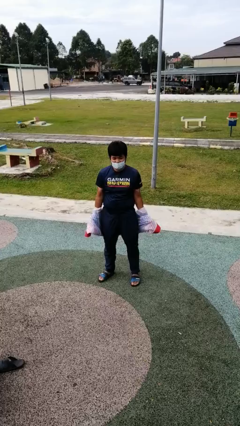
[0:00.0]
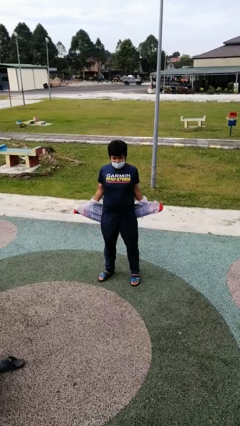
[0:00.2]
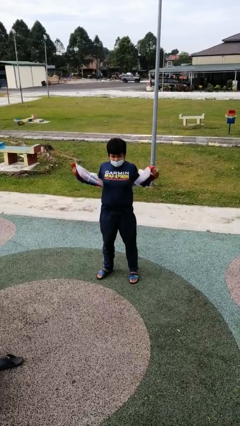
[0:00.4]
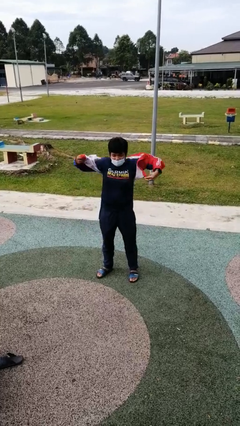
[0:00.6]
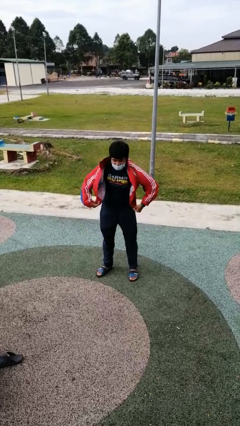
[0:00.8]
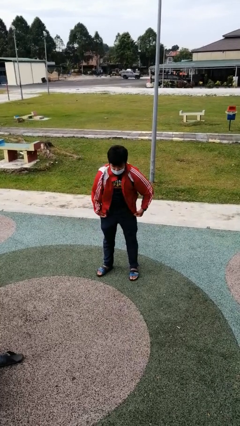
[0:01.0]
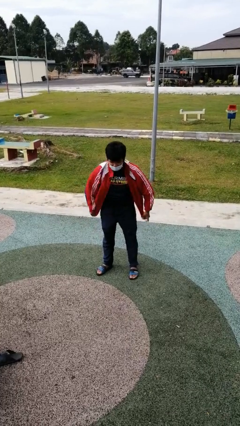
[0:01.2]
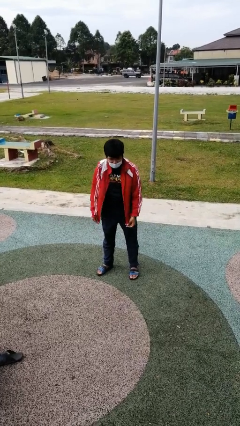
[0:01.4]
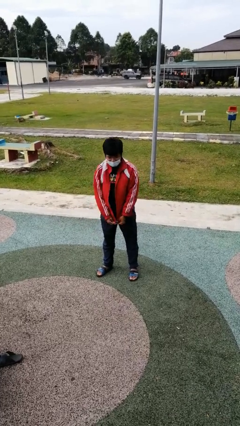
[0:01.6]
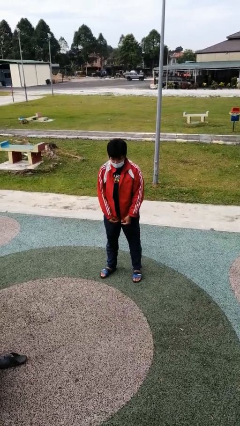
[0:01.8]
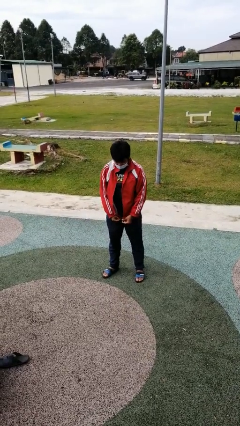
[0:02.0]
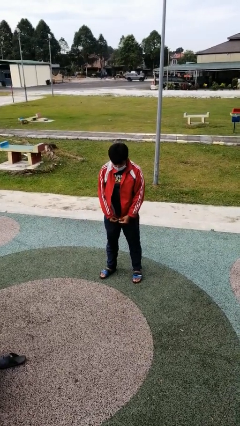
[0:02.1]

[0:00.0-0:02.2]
person puts on jacket

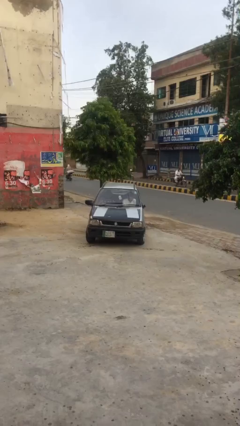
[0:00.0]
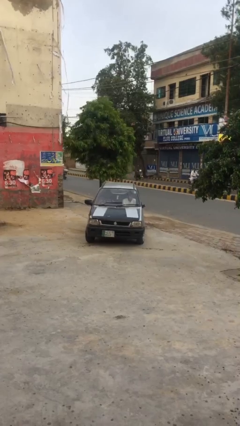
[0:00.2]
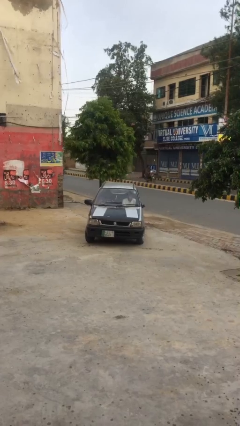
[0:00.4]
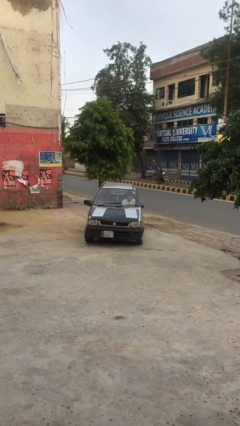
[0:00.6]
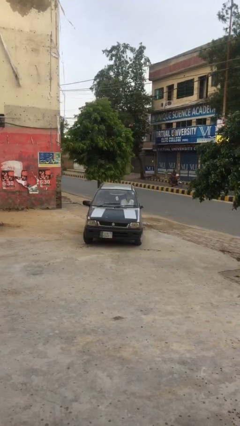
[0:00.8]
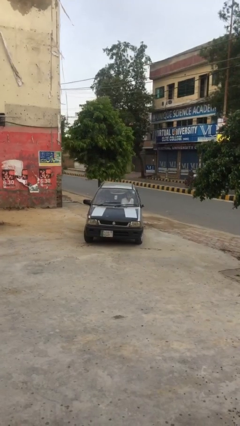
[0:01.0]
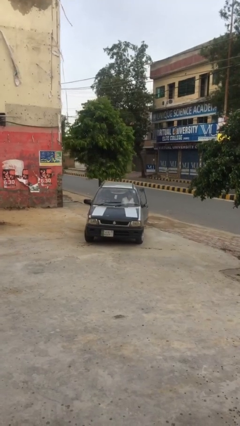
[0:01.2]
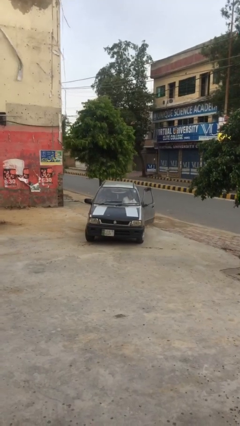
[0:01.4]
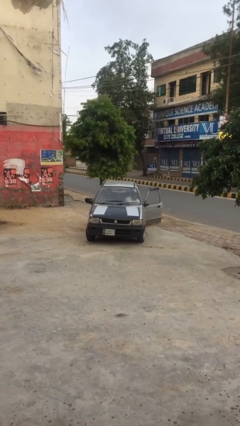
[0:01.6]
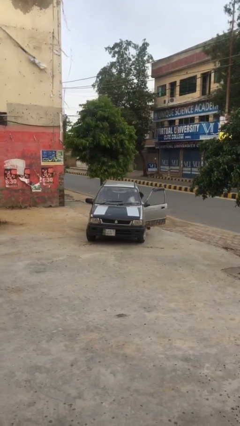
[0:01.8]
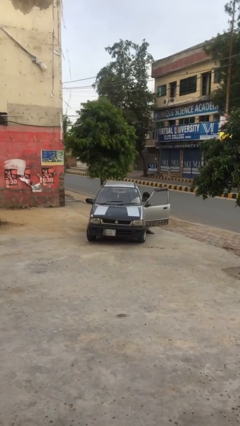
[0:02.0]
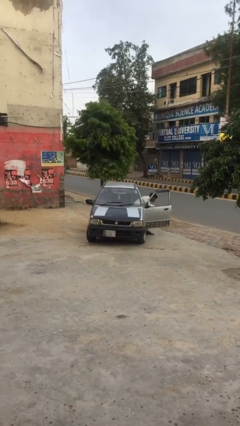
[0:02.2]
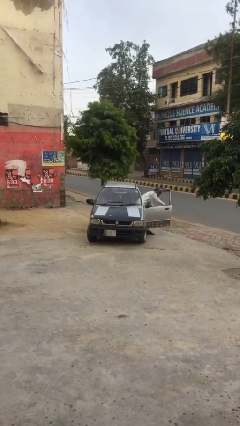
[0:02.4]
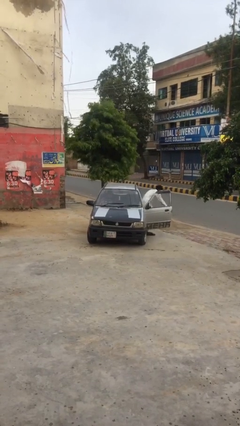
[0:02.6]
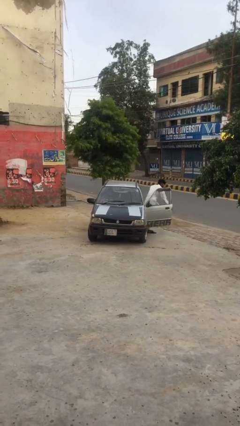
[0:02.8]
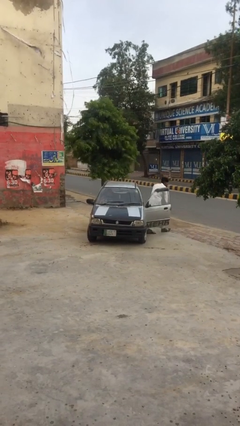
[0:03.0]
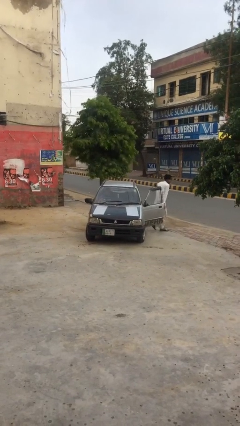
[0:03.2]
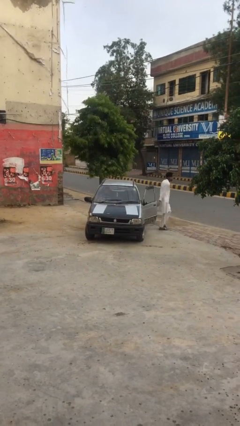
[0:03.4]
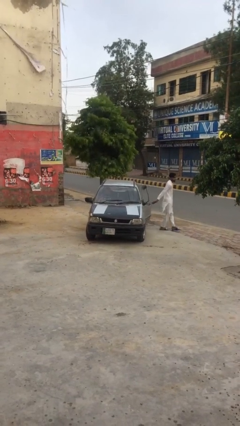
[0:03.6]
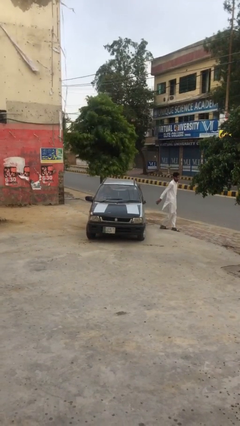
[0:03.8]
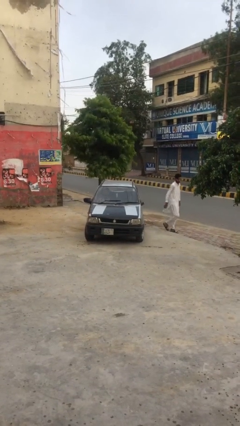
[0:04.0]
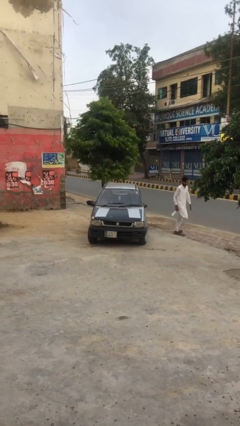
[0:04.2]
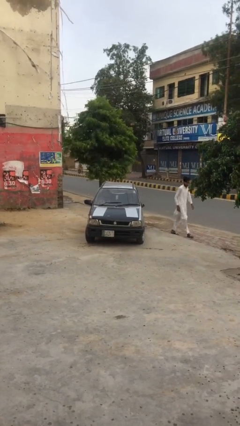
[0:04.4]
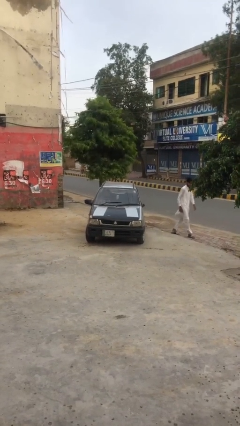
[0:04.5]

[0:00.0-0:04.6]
car drops off person

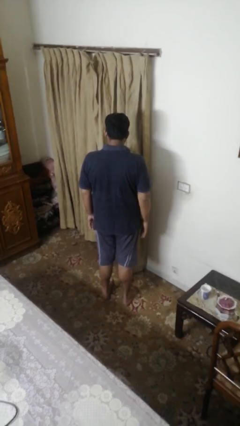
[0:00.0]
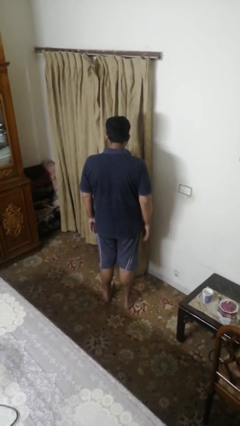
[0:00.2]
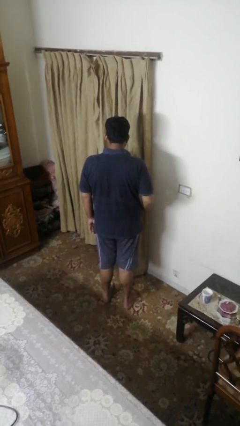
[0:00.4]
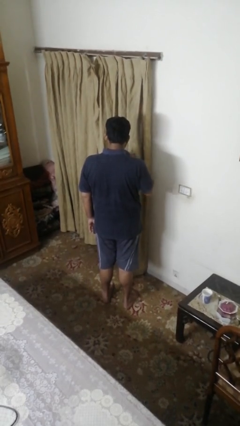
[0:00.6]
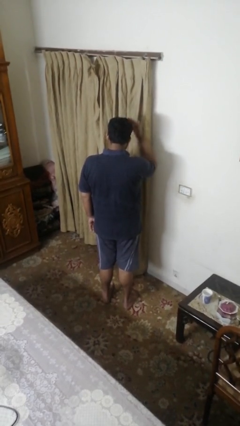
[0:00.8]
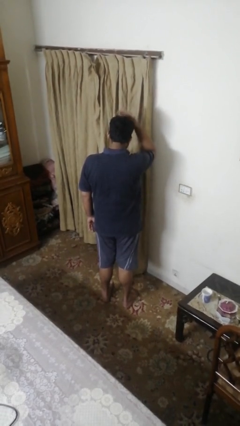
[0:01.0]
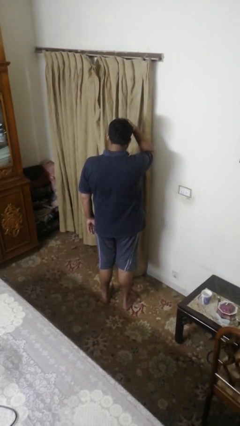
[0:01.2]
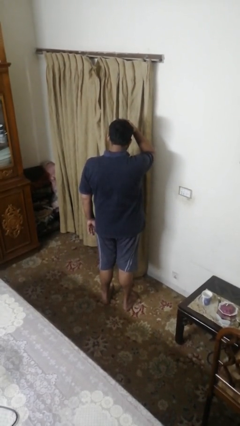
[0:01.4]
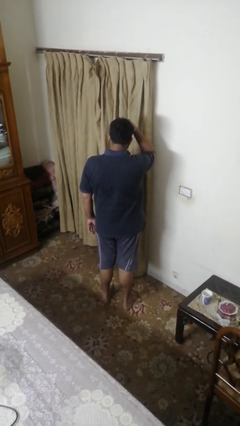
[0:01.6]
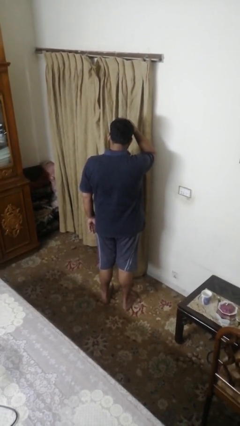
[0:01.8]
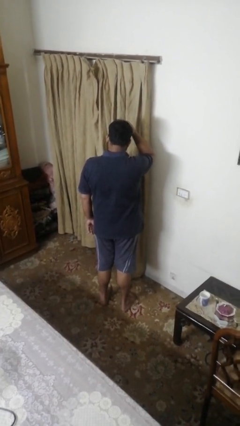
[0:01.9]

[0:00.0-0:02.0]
person pats head

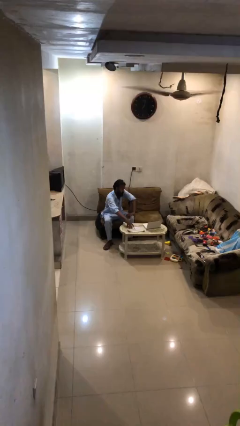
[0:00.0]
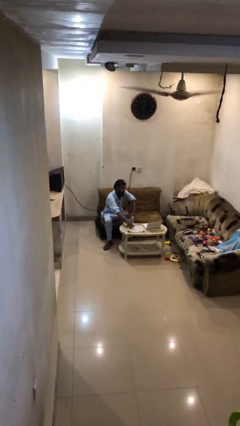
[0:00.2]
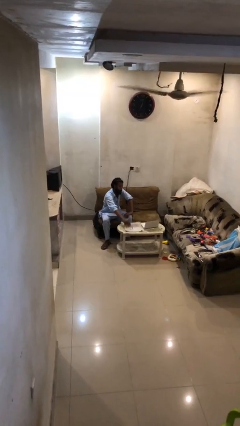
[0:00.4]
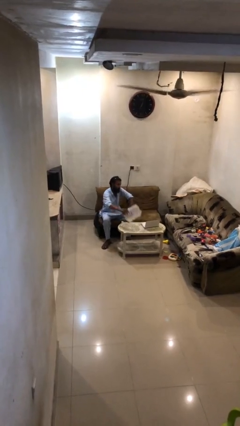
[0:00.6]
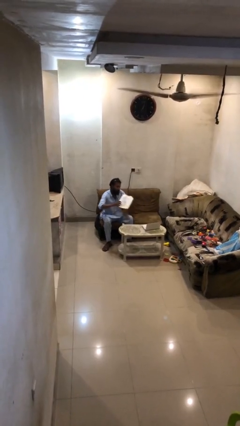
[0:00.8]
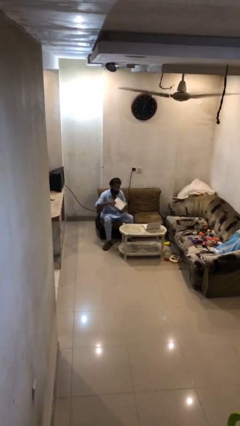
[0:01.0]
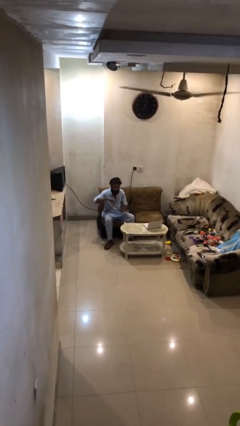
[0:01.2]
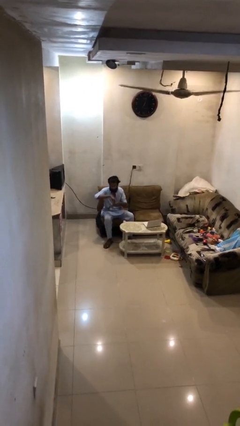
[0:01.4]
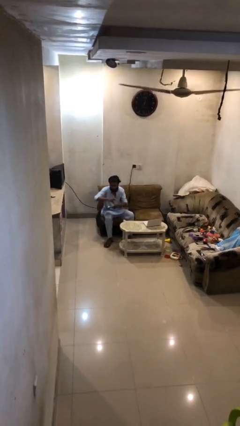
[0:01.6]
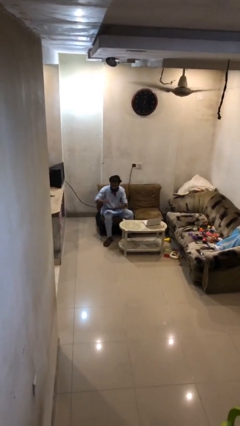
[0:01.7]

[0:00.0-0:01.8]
person picks up object from table

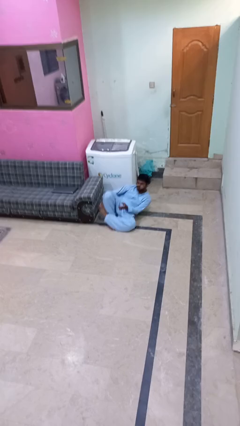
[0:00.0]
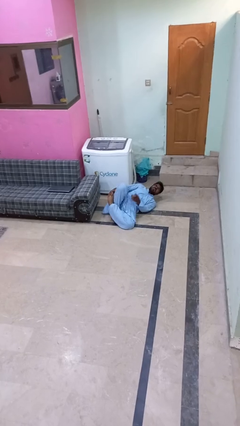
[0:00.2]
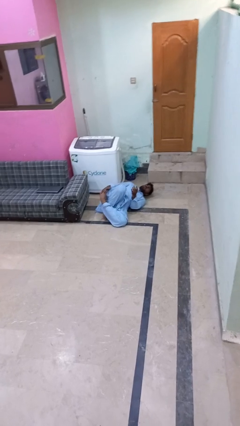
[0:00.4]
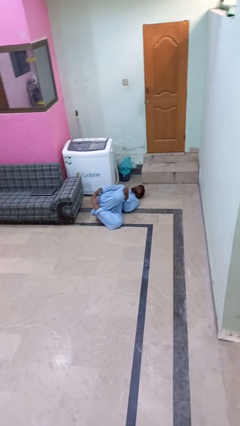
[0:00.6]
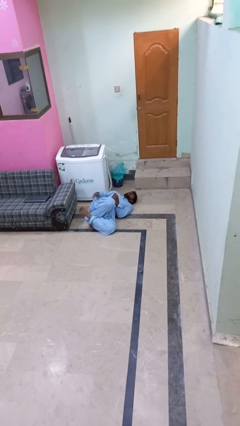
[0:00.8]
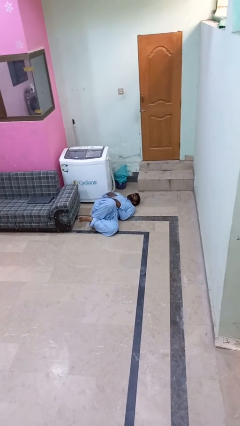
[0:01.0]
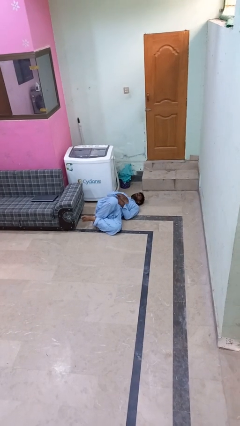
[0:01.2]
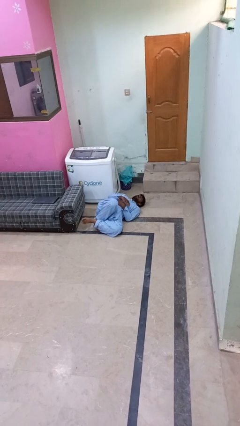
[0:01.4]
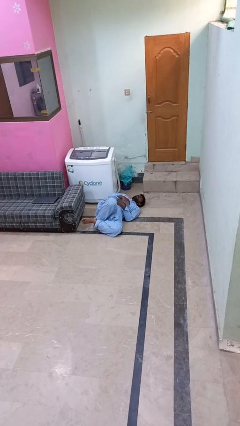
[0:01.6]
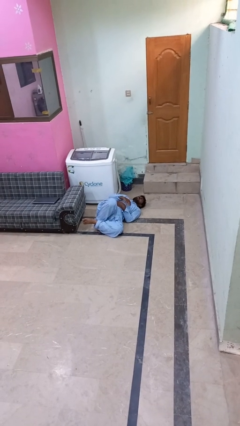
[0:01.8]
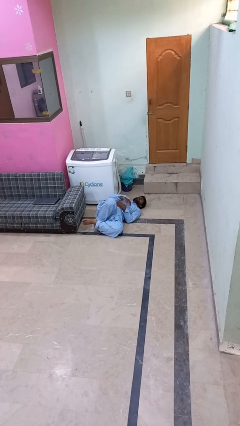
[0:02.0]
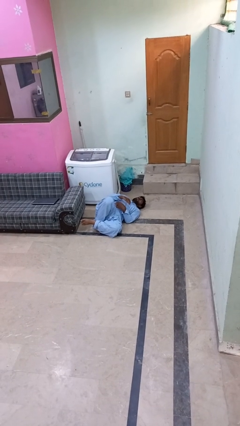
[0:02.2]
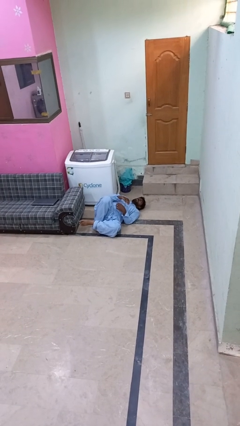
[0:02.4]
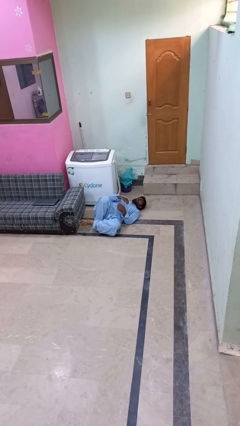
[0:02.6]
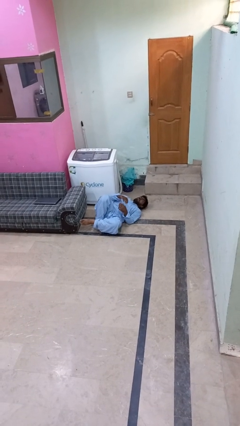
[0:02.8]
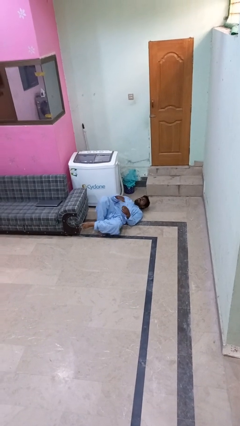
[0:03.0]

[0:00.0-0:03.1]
person lies down on floor

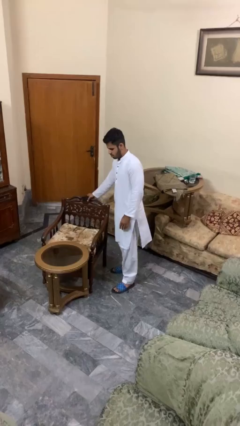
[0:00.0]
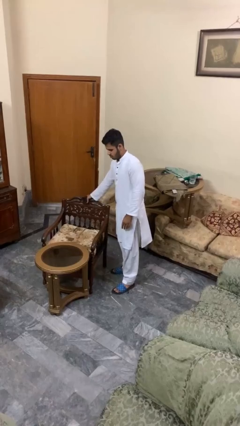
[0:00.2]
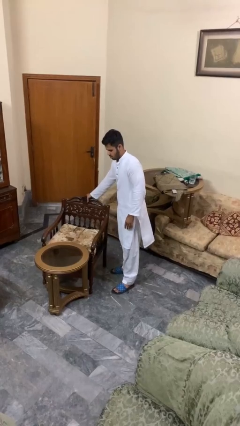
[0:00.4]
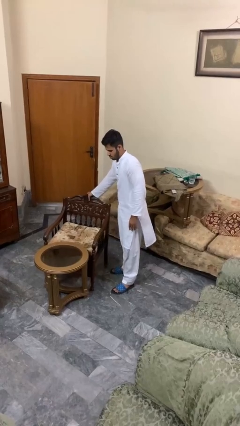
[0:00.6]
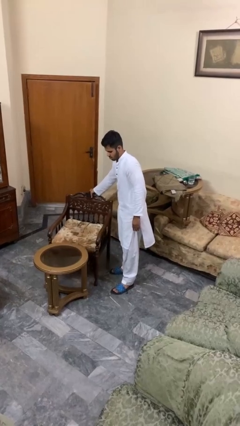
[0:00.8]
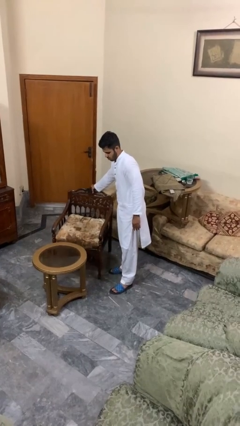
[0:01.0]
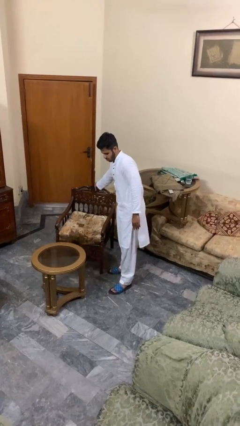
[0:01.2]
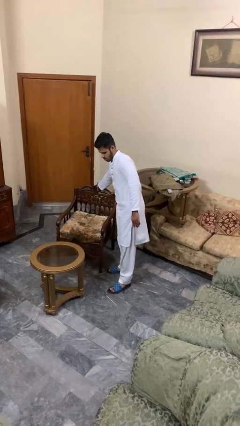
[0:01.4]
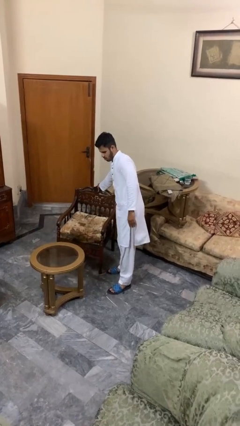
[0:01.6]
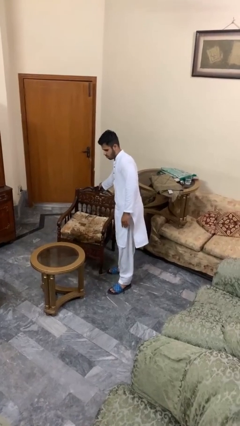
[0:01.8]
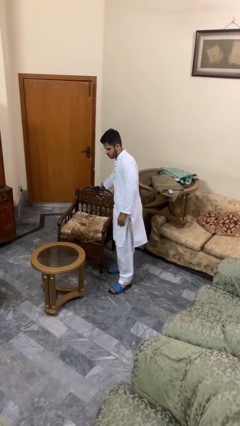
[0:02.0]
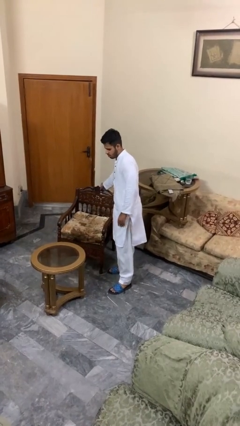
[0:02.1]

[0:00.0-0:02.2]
person pulls out chair

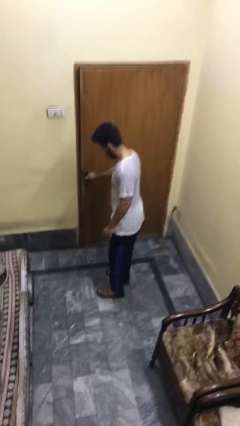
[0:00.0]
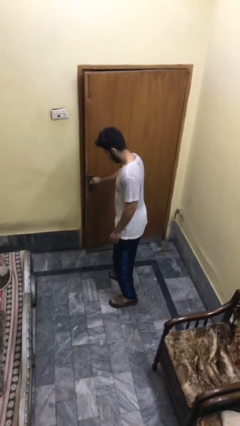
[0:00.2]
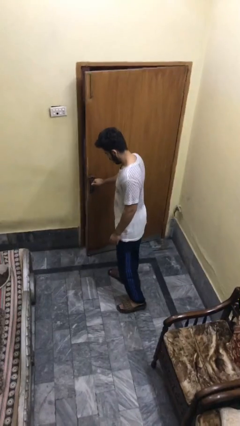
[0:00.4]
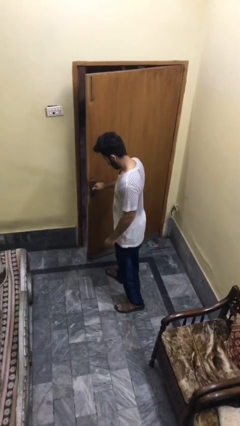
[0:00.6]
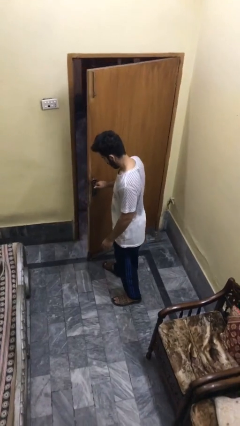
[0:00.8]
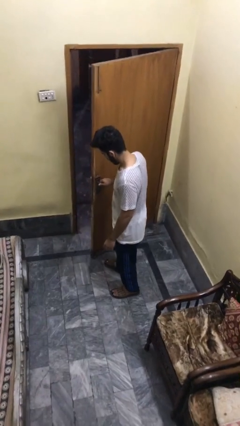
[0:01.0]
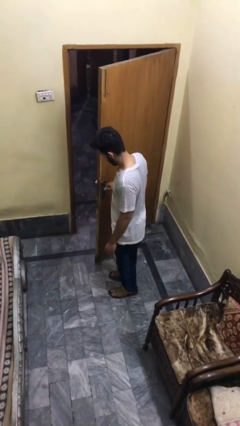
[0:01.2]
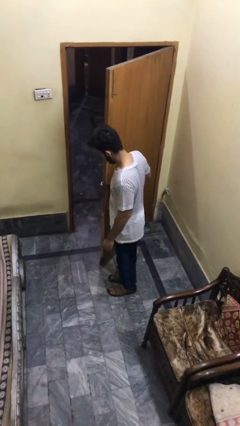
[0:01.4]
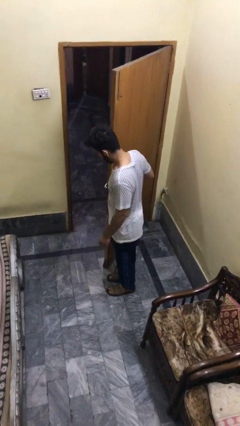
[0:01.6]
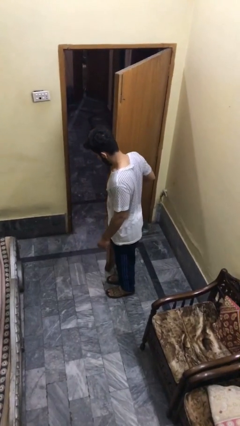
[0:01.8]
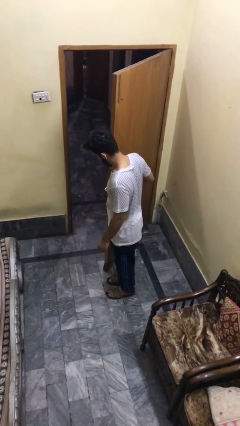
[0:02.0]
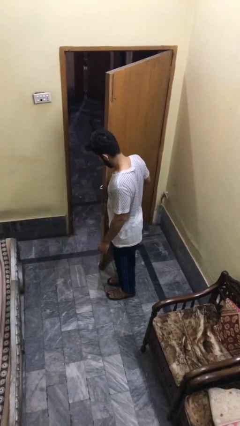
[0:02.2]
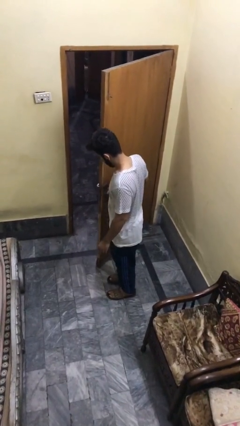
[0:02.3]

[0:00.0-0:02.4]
person opens facility door
